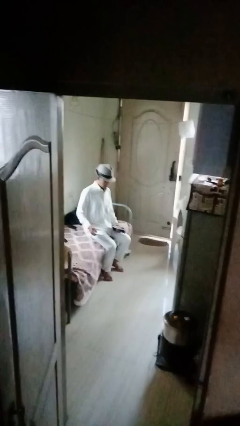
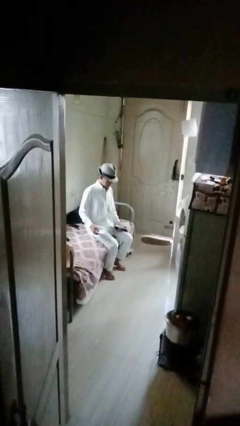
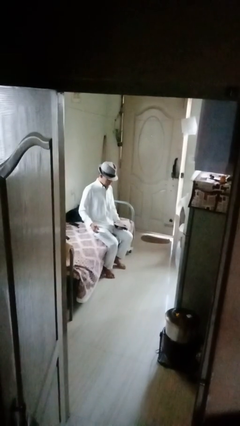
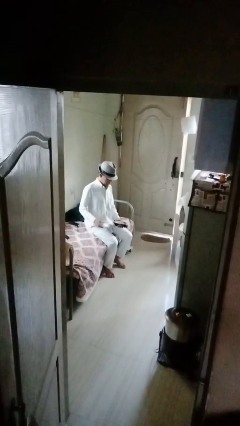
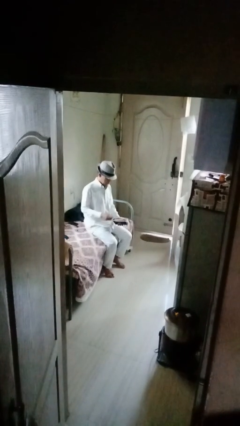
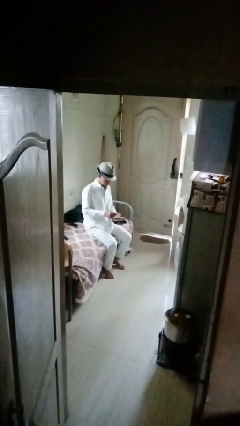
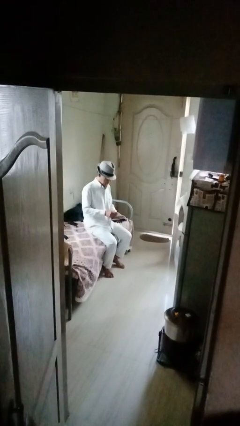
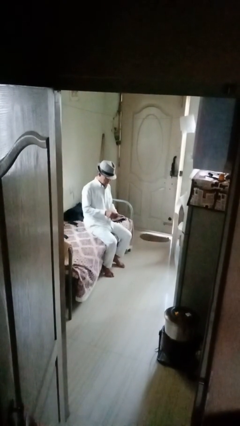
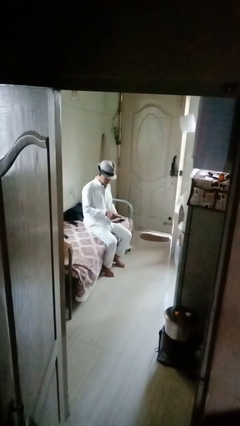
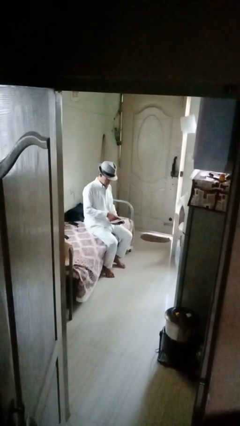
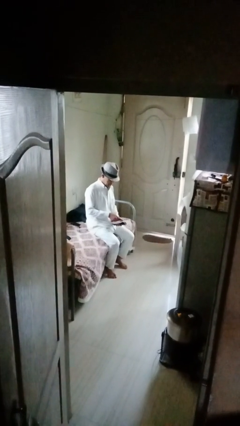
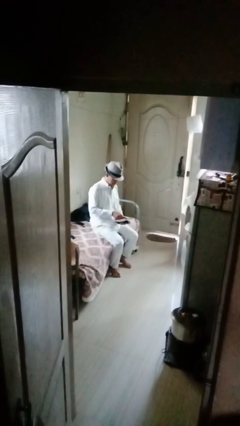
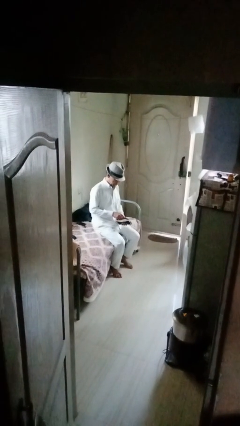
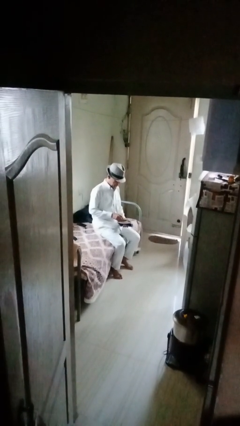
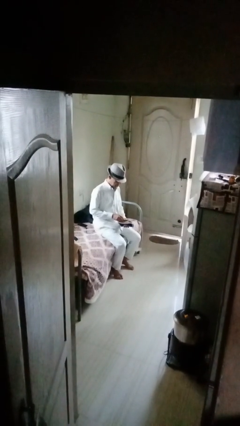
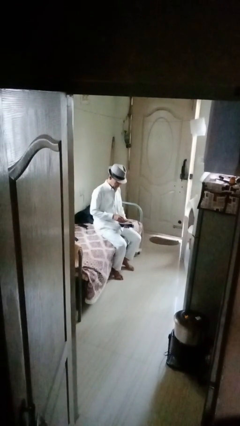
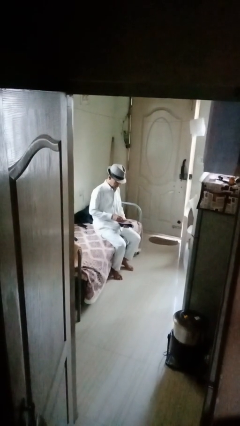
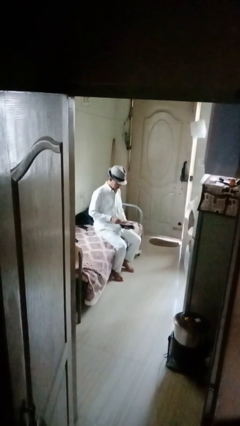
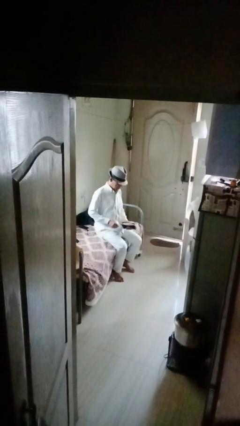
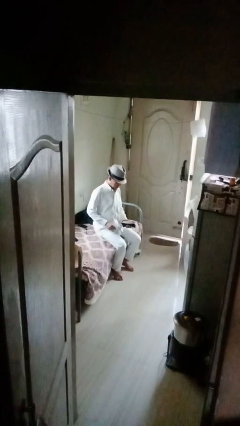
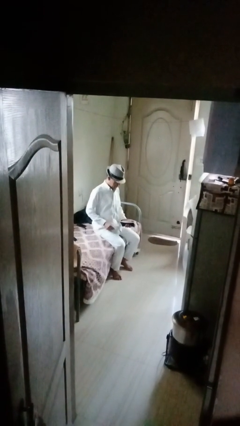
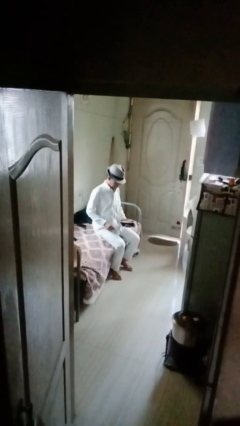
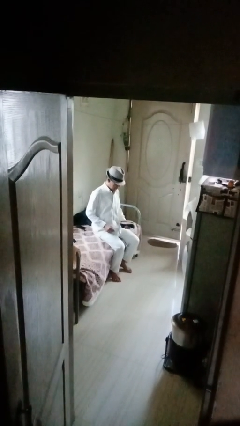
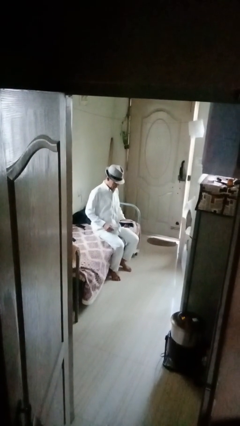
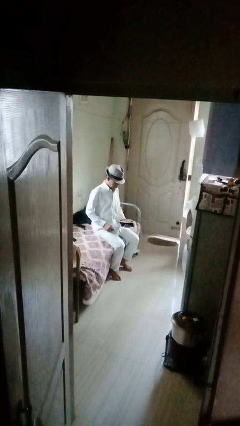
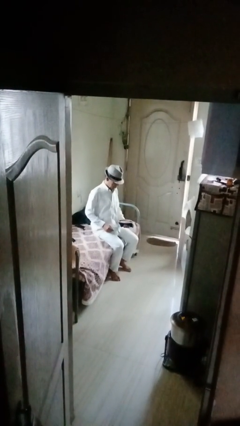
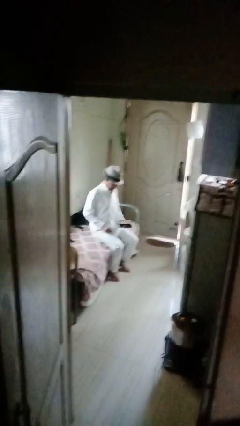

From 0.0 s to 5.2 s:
person puts object into purse

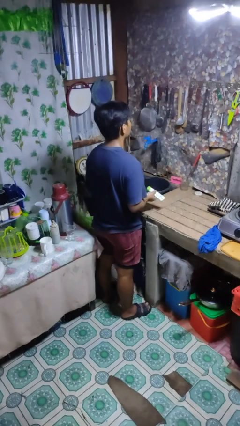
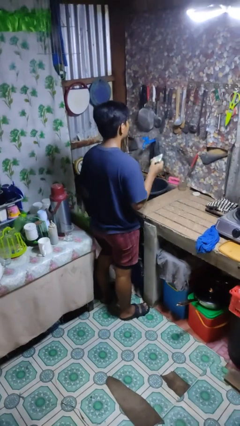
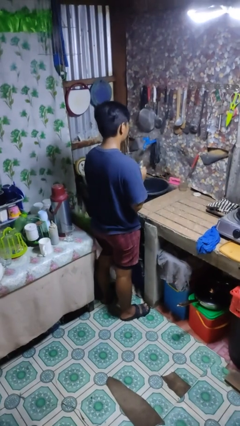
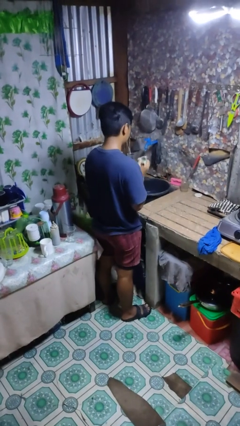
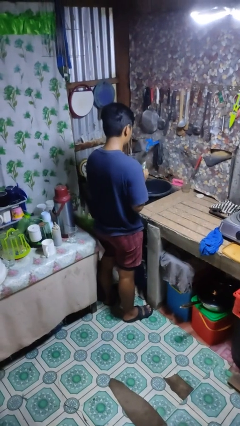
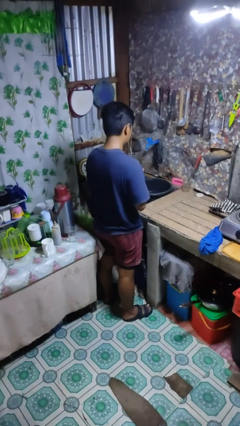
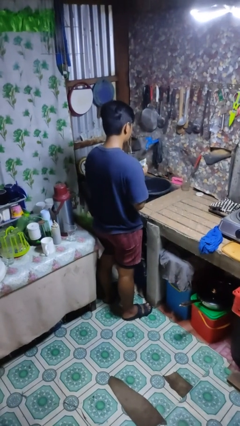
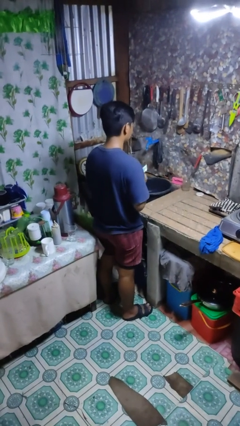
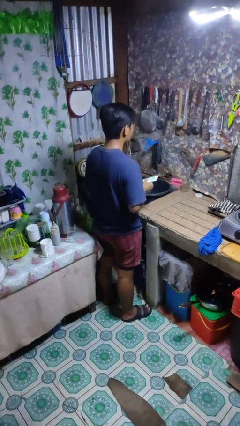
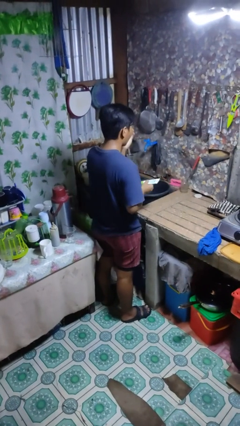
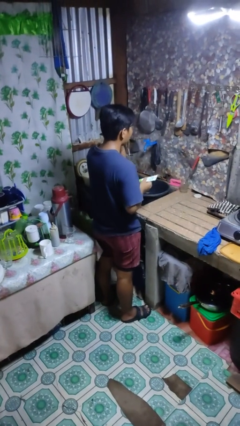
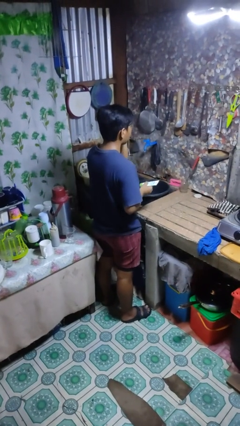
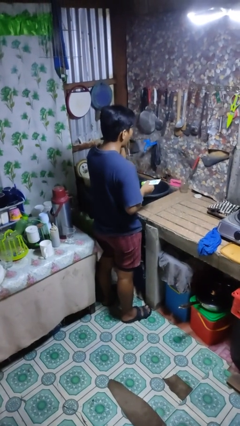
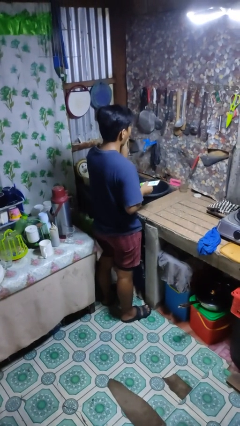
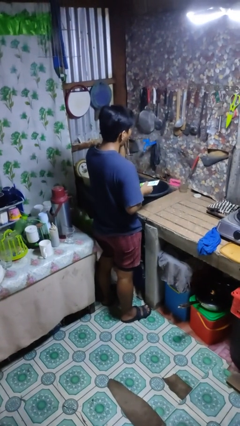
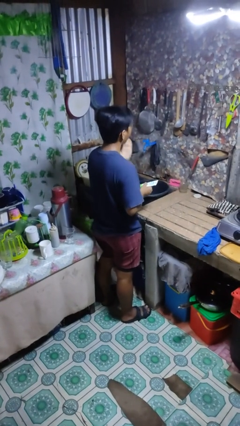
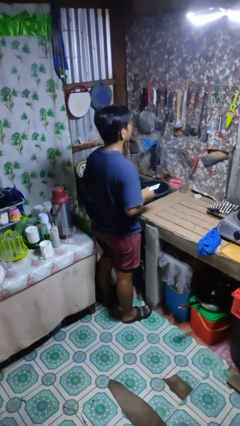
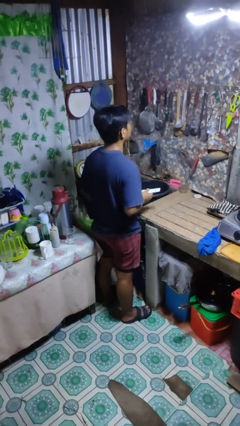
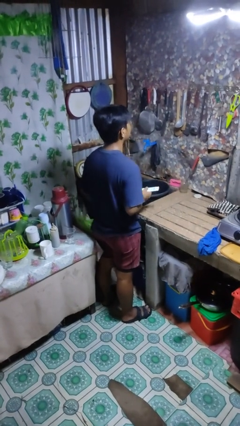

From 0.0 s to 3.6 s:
person applies facial moisturizer

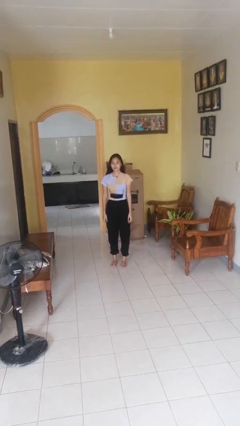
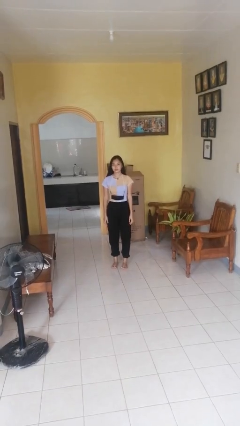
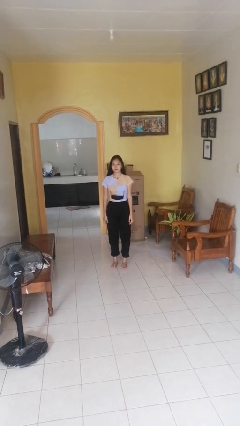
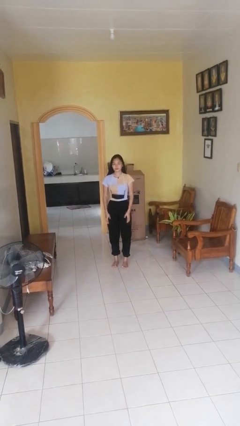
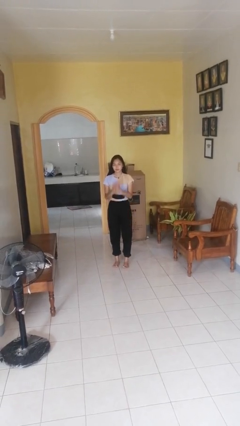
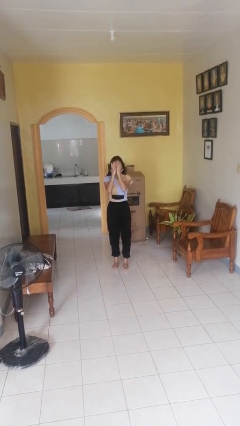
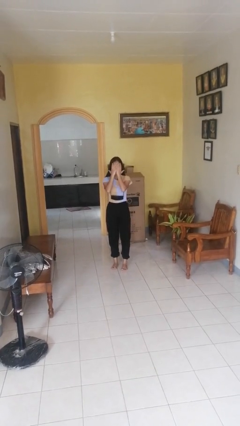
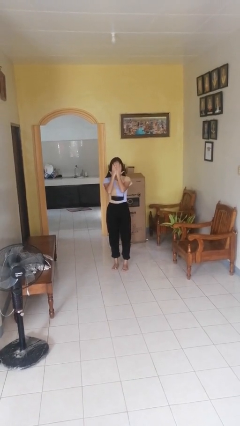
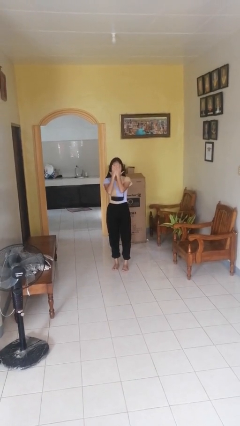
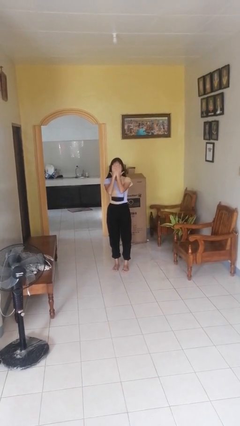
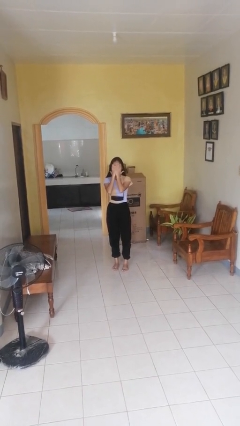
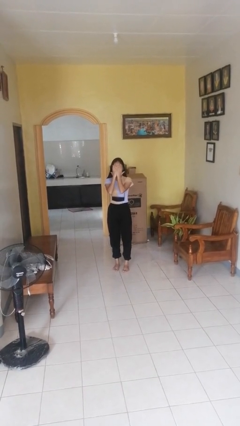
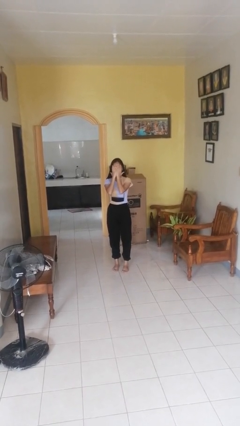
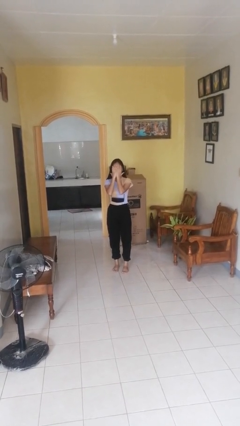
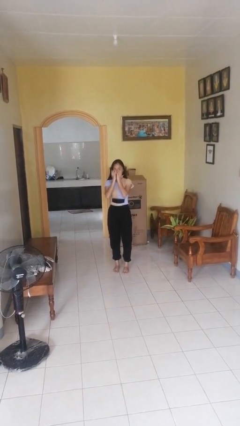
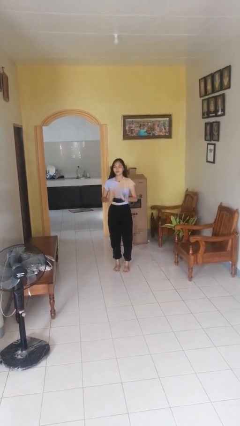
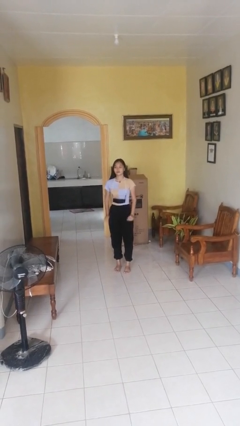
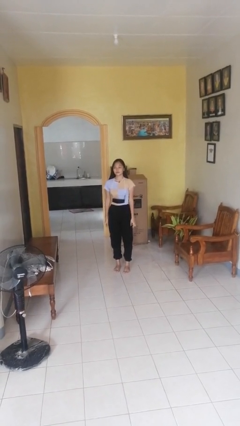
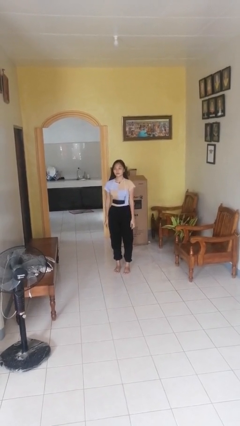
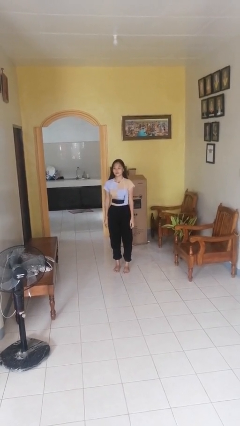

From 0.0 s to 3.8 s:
person covers face with hands

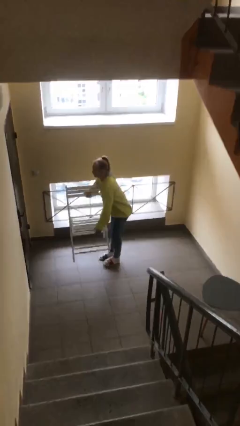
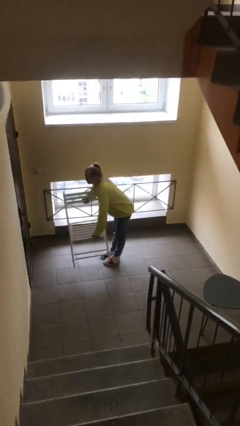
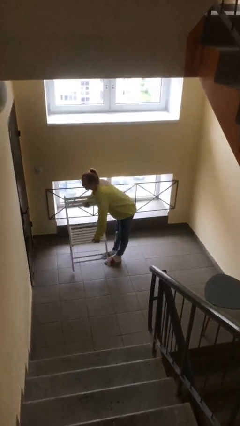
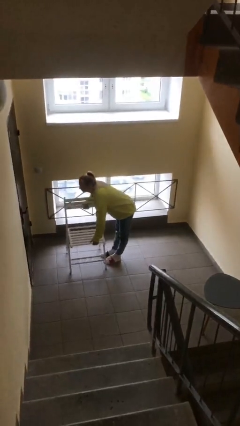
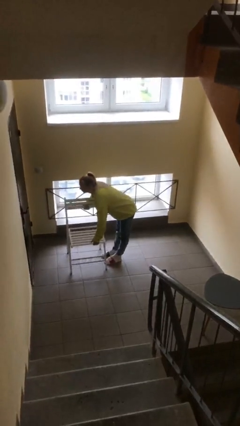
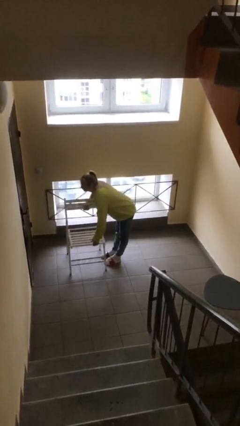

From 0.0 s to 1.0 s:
person puts down object on floor

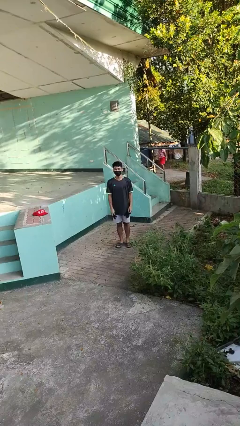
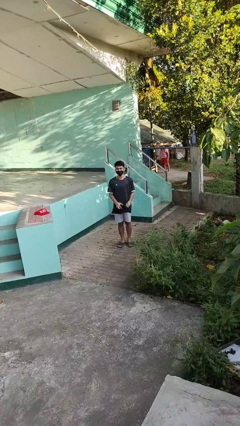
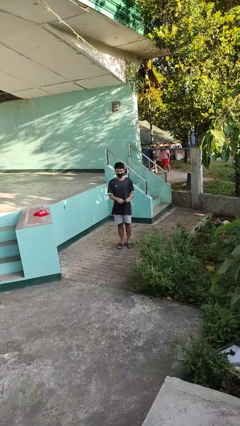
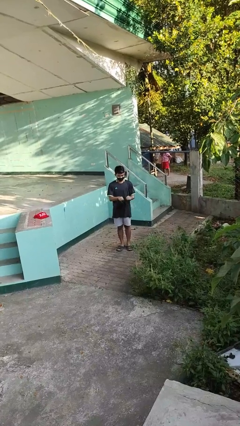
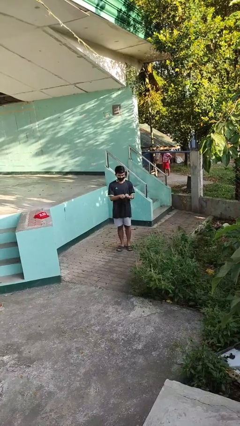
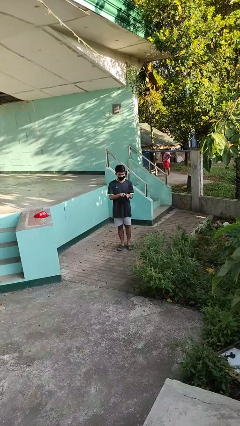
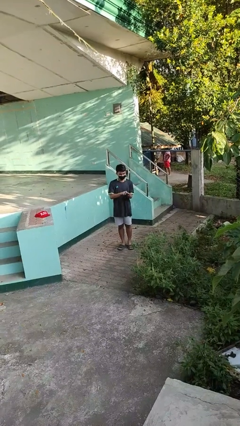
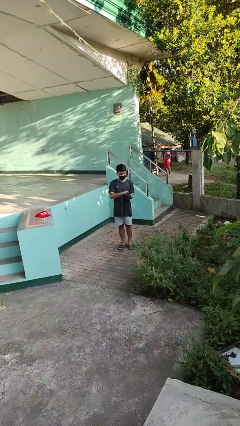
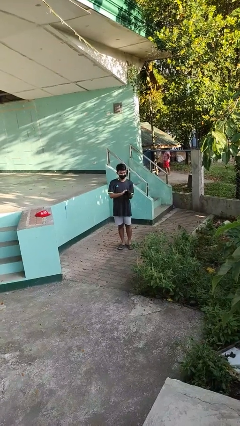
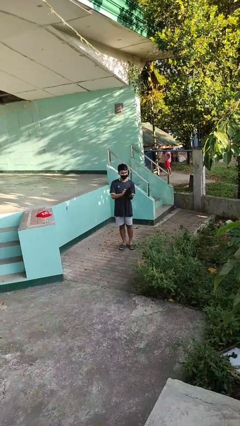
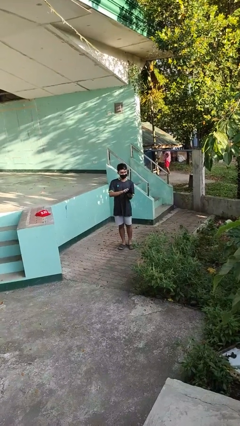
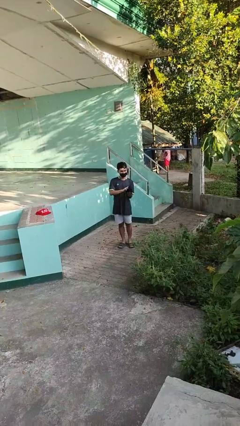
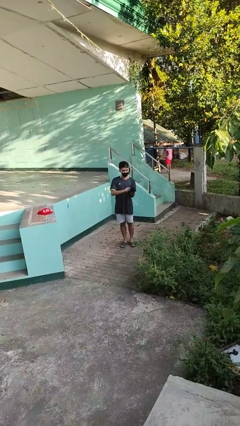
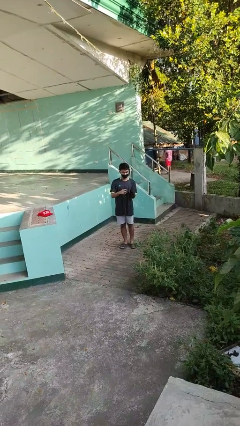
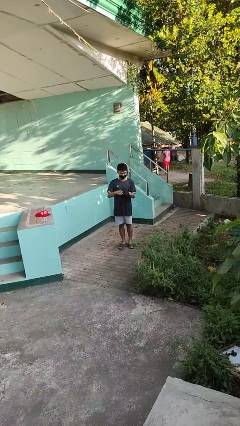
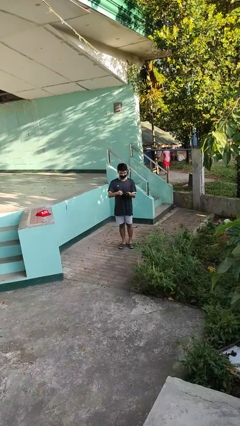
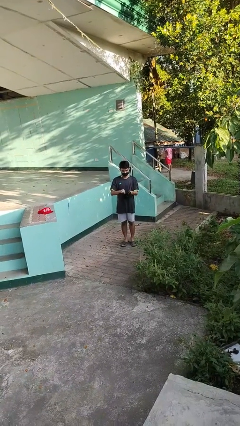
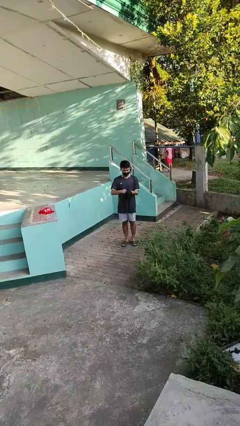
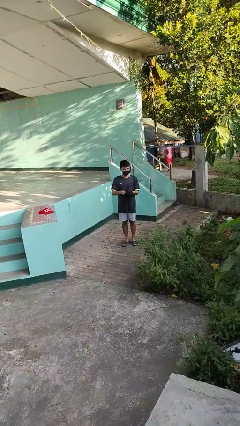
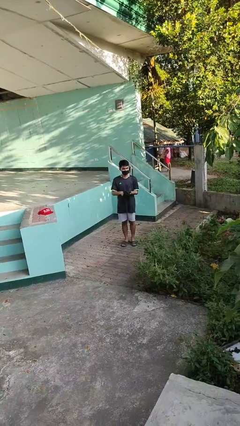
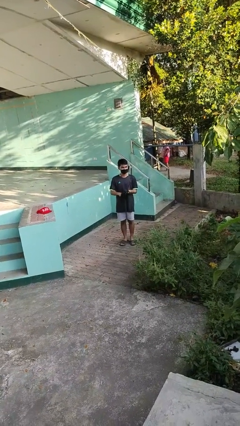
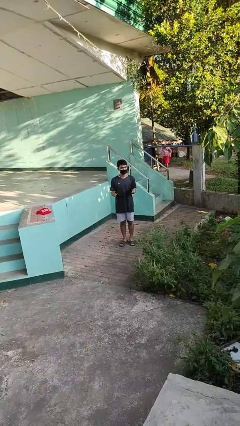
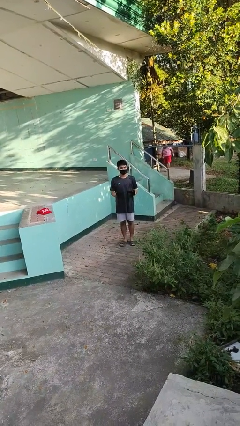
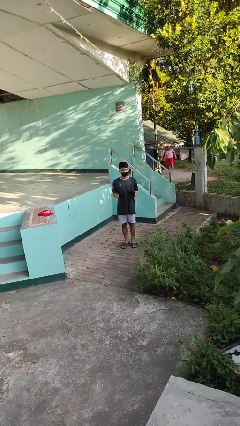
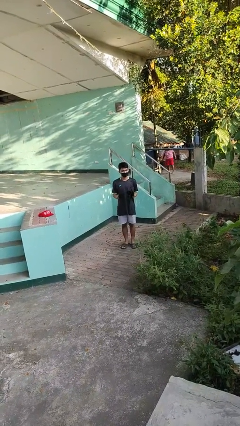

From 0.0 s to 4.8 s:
person puts on gloves
